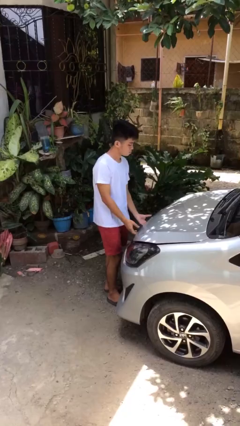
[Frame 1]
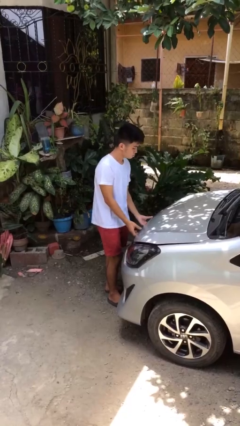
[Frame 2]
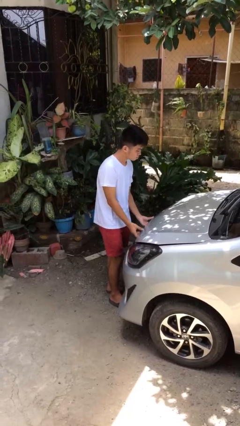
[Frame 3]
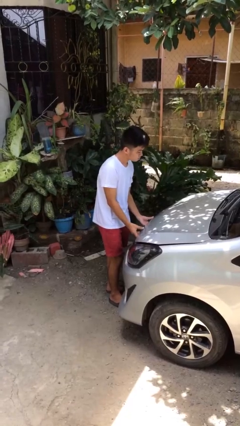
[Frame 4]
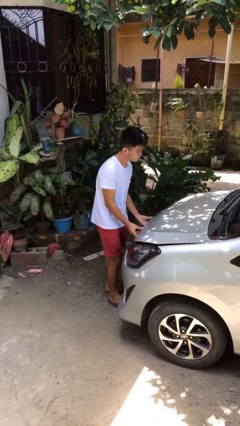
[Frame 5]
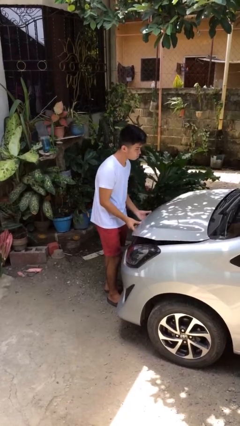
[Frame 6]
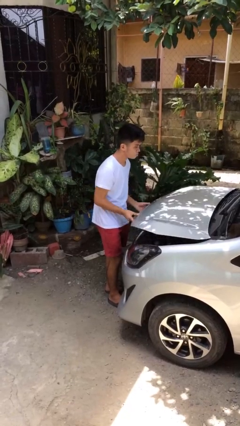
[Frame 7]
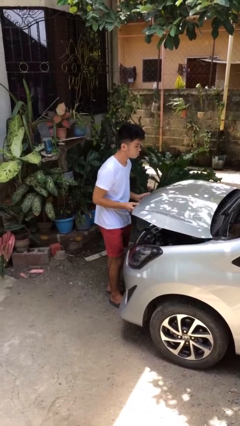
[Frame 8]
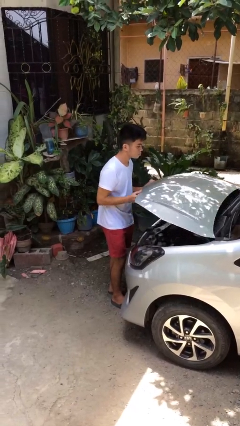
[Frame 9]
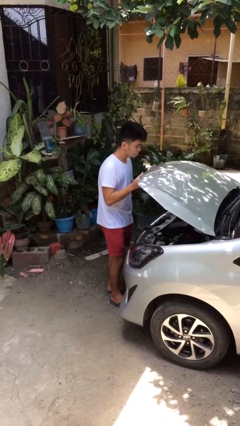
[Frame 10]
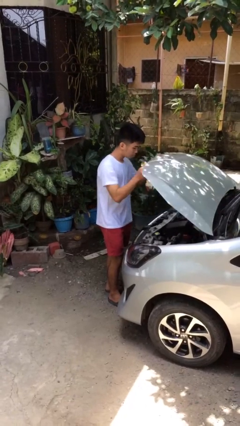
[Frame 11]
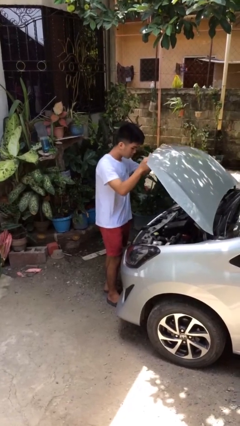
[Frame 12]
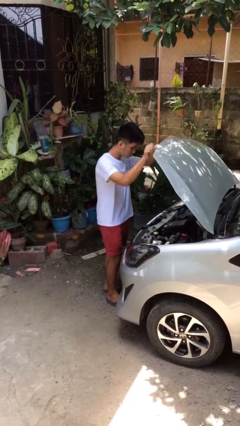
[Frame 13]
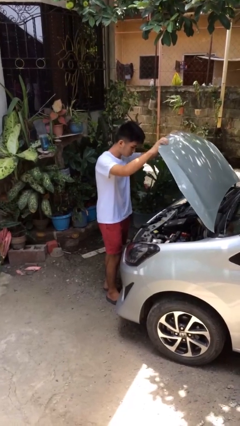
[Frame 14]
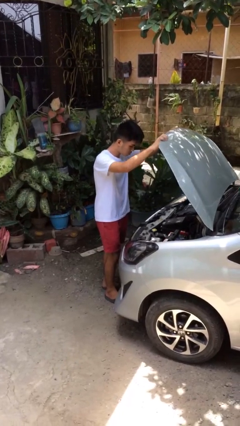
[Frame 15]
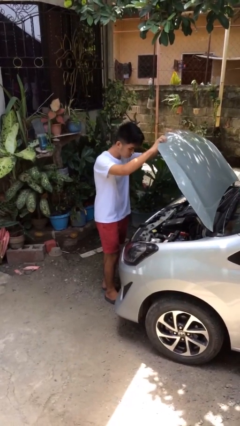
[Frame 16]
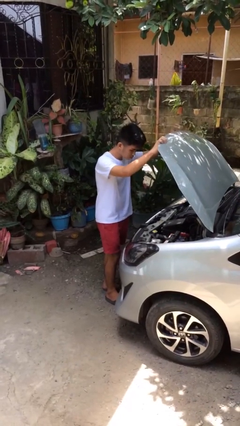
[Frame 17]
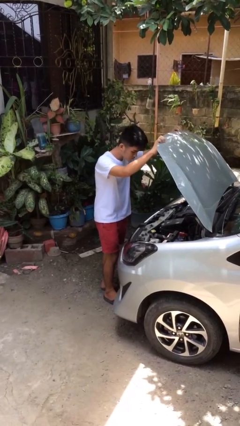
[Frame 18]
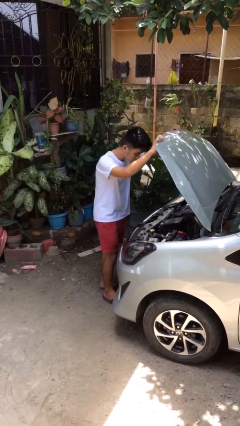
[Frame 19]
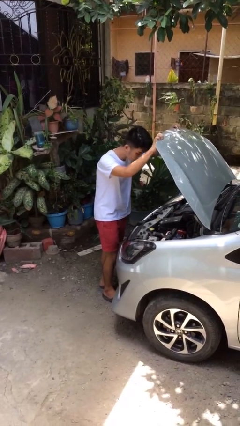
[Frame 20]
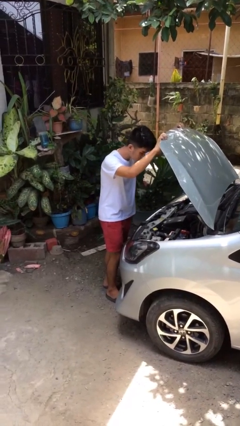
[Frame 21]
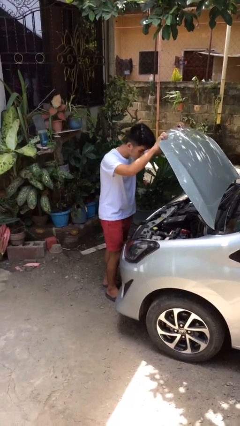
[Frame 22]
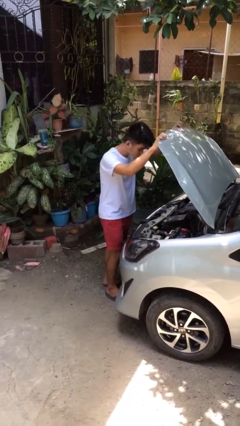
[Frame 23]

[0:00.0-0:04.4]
person opens car hood

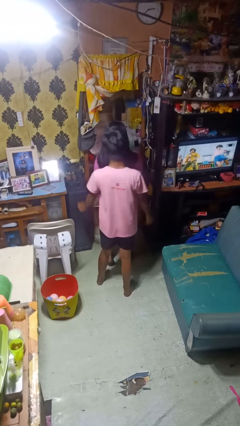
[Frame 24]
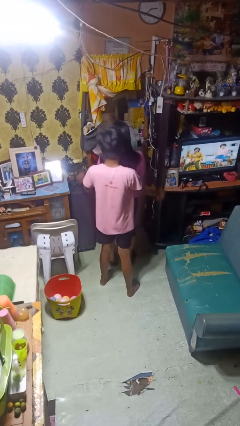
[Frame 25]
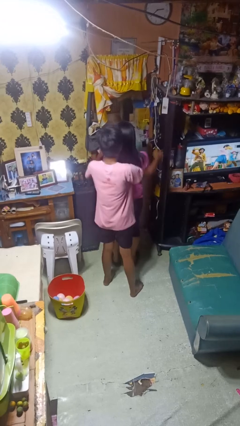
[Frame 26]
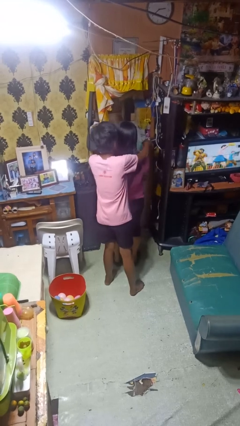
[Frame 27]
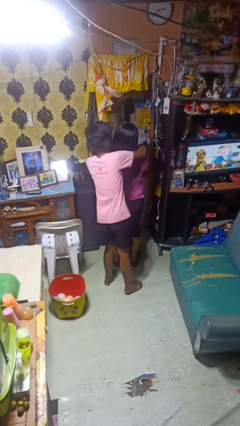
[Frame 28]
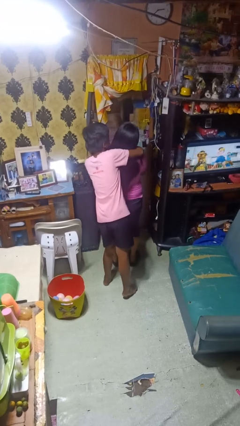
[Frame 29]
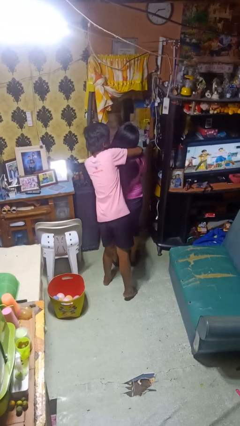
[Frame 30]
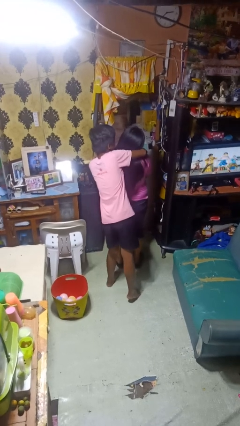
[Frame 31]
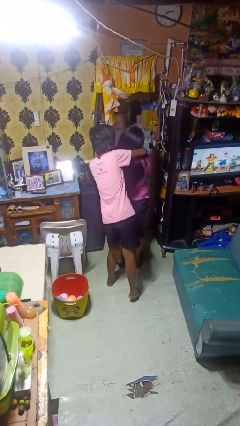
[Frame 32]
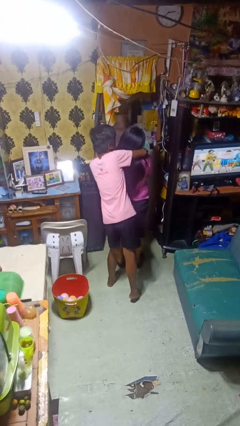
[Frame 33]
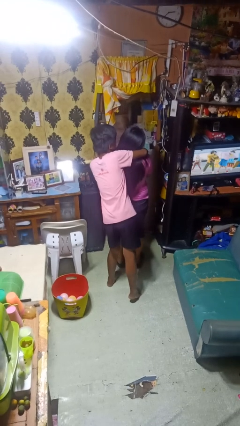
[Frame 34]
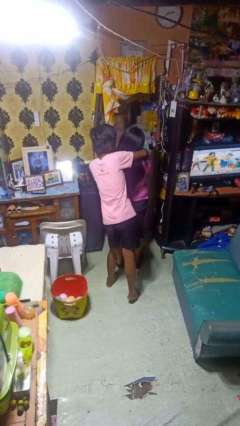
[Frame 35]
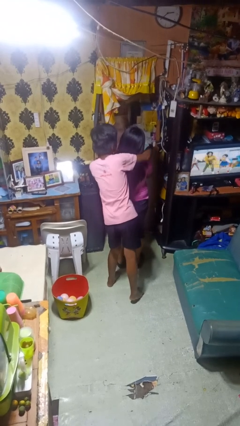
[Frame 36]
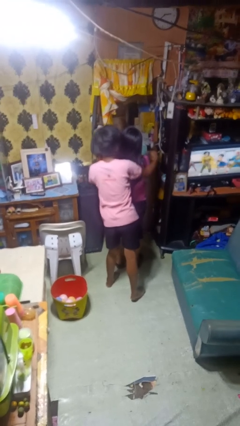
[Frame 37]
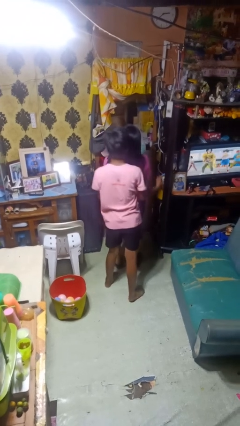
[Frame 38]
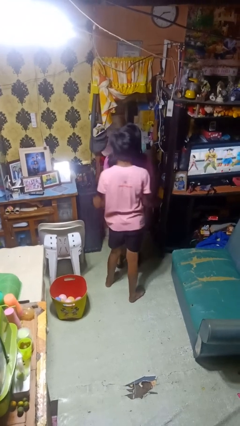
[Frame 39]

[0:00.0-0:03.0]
person hugs person from behind

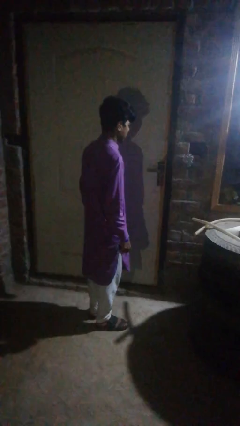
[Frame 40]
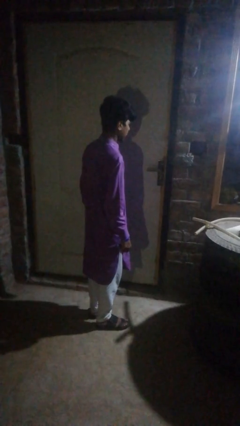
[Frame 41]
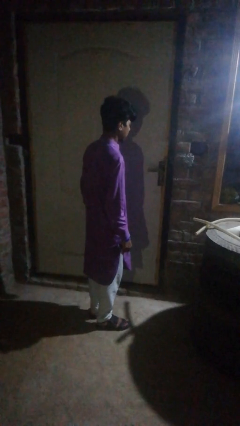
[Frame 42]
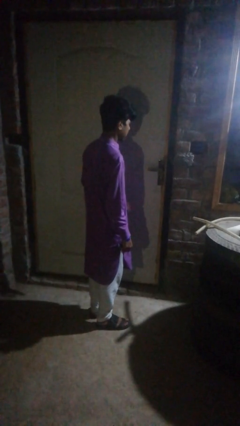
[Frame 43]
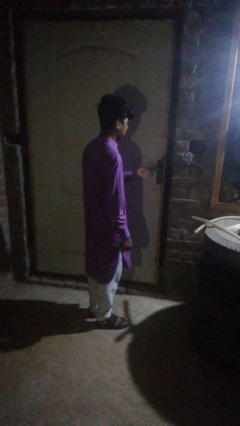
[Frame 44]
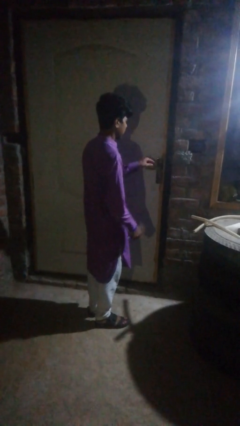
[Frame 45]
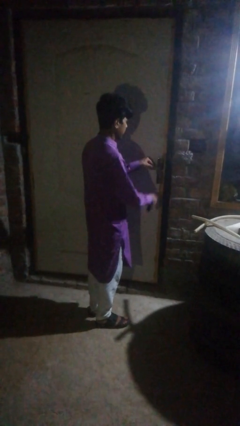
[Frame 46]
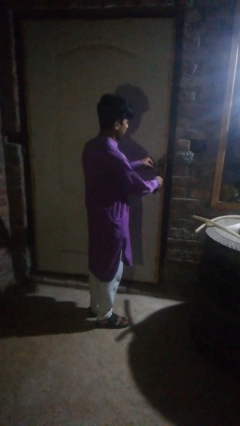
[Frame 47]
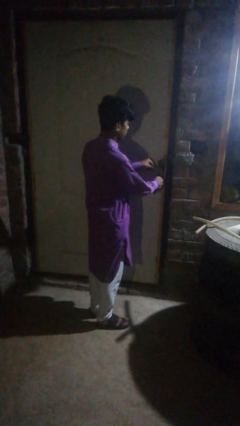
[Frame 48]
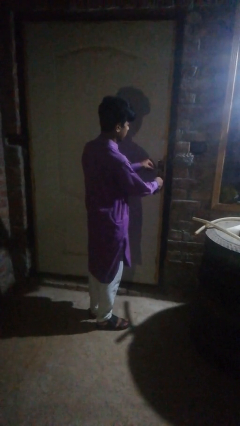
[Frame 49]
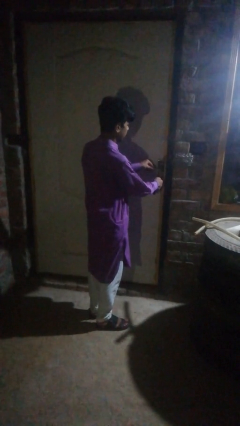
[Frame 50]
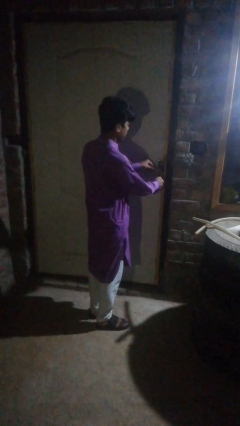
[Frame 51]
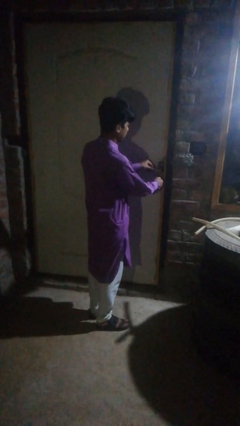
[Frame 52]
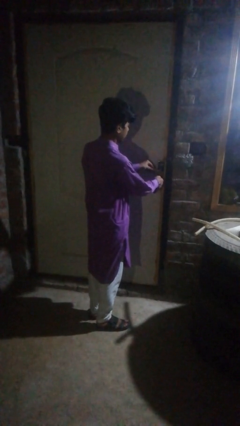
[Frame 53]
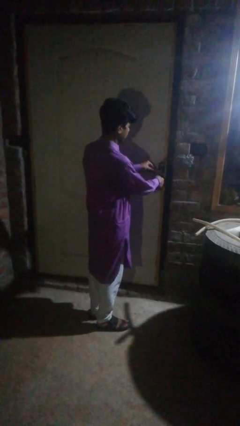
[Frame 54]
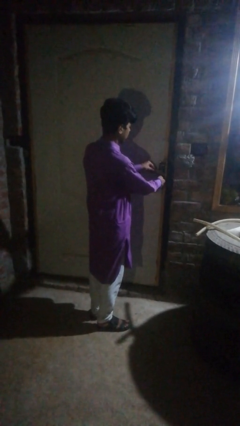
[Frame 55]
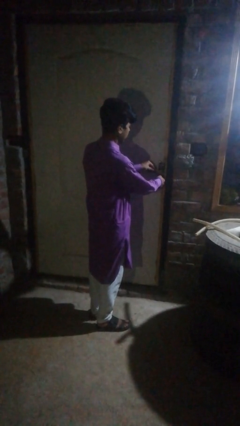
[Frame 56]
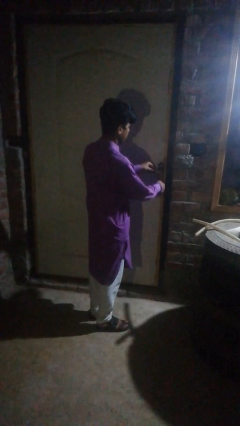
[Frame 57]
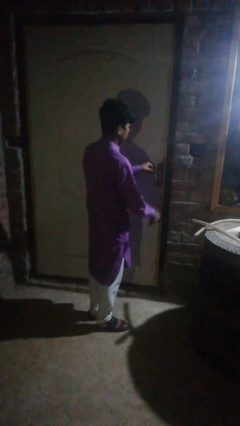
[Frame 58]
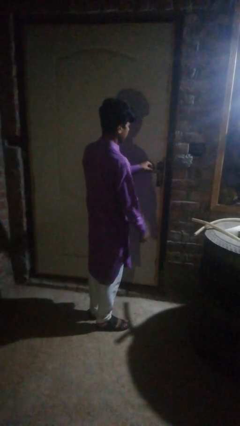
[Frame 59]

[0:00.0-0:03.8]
person unlocks door with keys

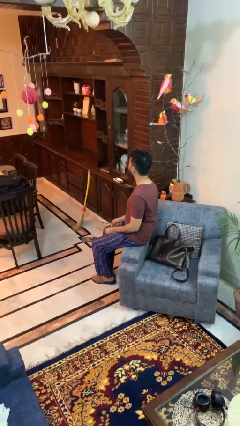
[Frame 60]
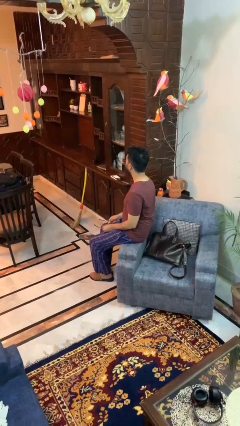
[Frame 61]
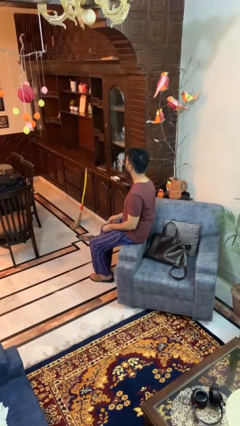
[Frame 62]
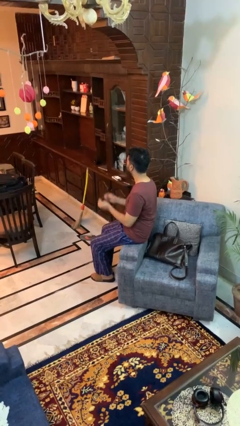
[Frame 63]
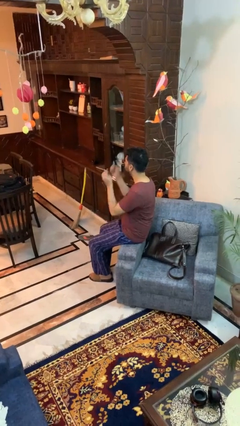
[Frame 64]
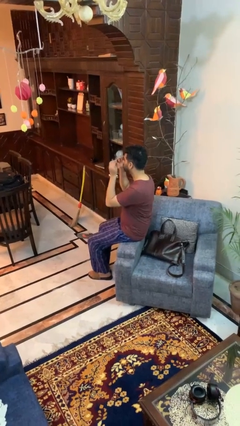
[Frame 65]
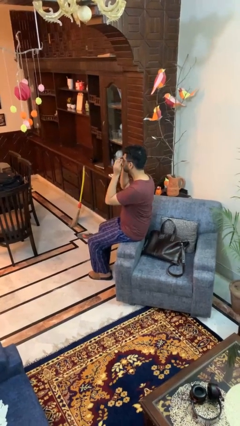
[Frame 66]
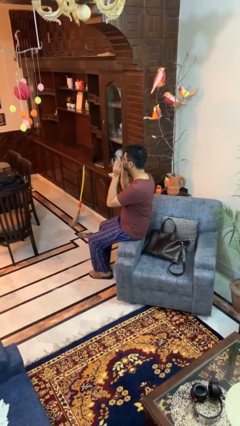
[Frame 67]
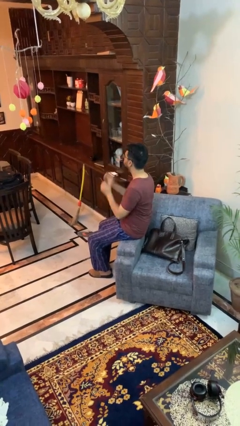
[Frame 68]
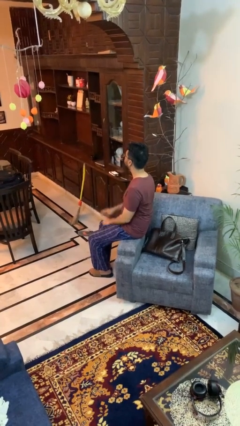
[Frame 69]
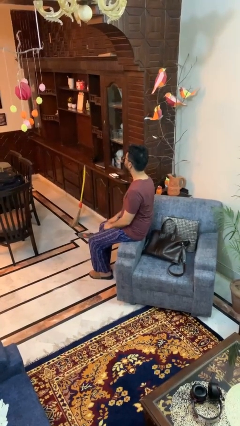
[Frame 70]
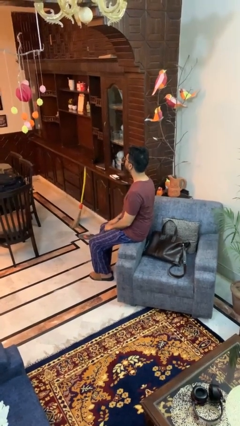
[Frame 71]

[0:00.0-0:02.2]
person puts on glasses

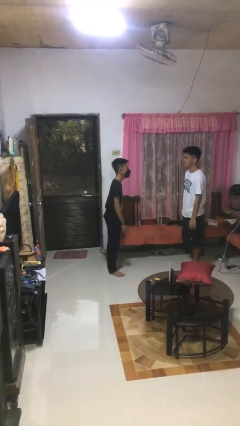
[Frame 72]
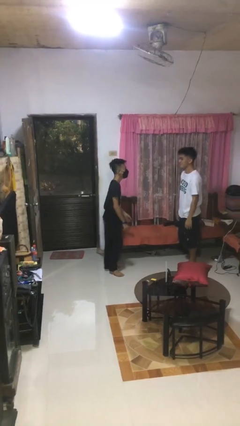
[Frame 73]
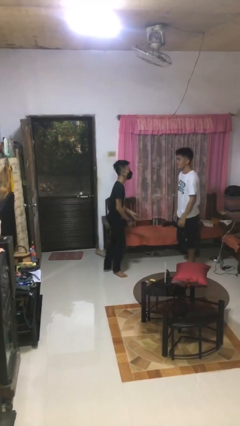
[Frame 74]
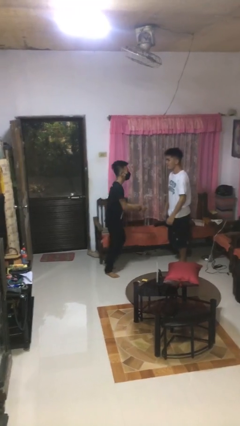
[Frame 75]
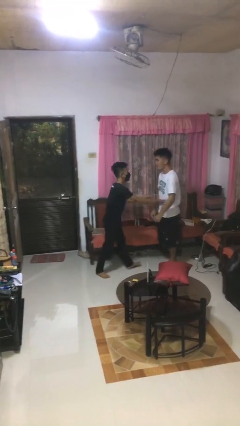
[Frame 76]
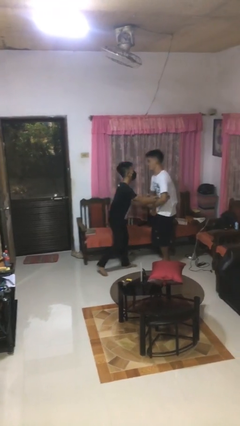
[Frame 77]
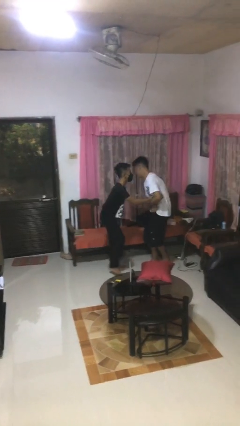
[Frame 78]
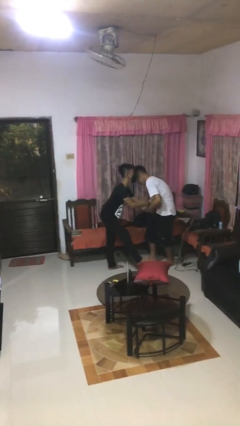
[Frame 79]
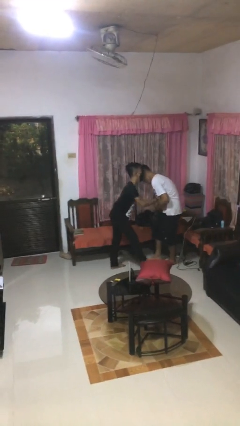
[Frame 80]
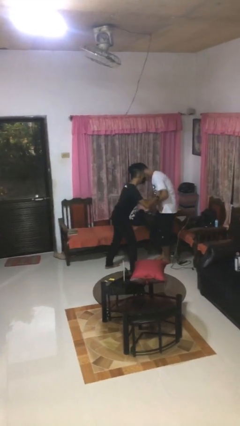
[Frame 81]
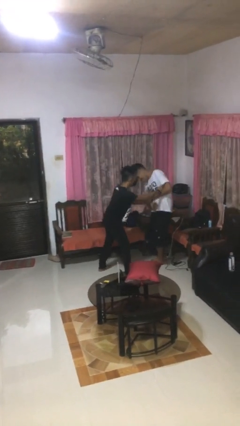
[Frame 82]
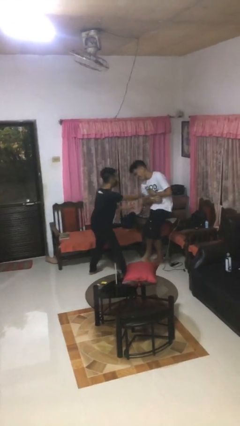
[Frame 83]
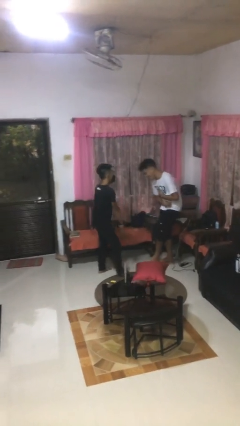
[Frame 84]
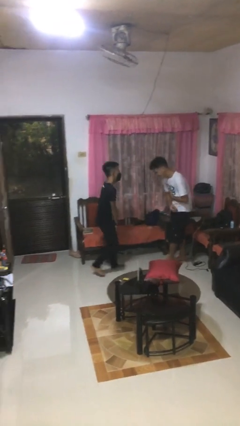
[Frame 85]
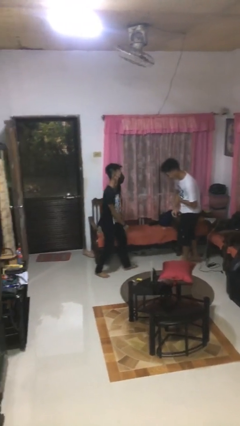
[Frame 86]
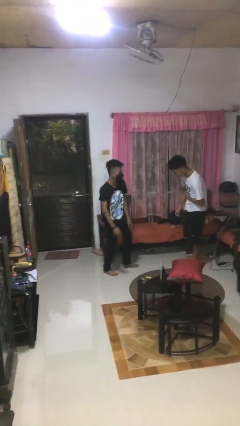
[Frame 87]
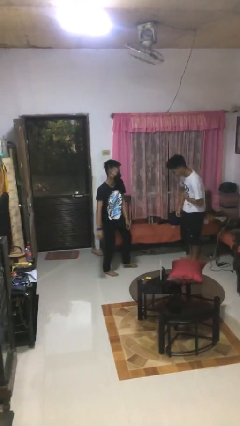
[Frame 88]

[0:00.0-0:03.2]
person tickles person

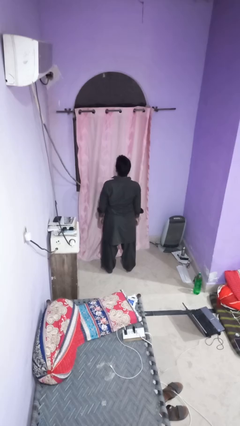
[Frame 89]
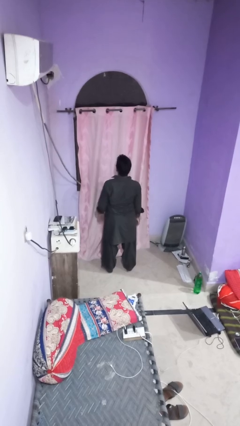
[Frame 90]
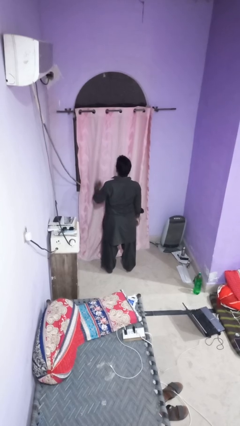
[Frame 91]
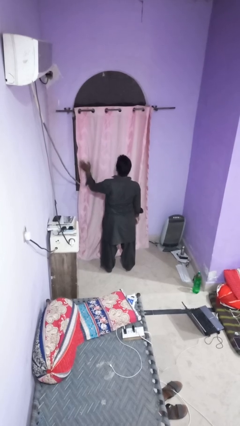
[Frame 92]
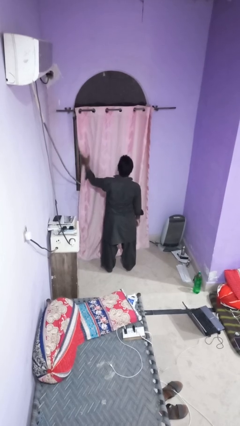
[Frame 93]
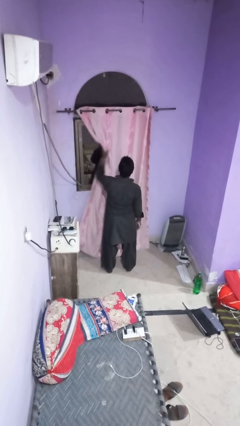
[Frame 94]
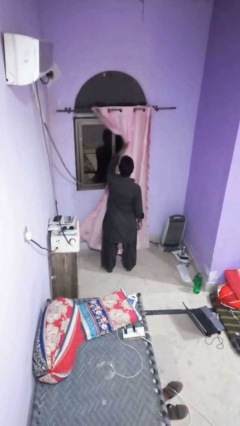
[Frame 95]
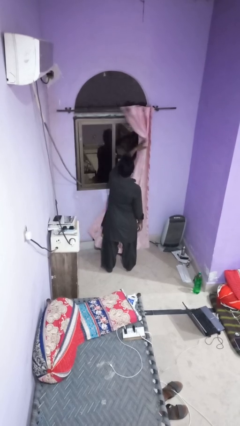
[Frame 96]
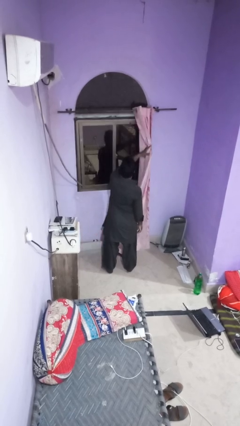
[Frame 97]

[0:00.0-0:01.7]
person opens curtains
